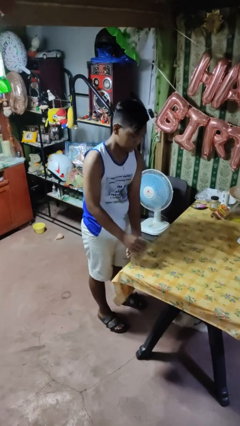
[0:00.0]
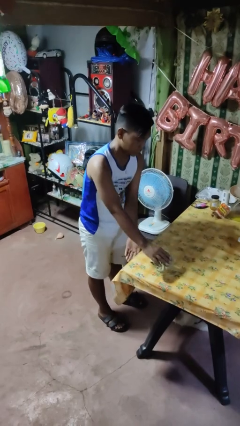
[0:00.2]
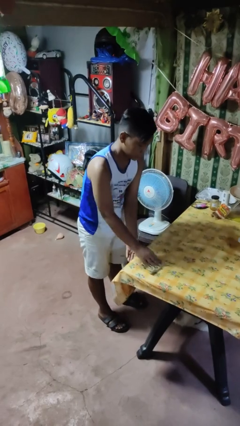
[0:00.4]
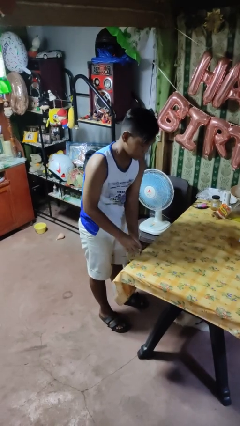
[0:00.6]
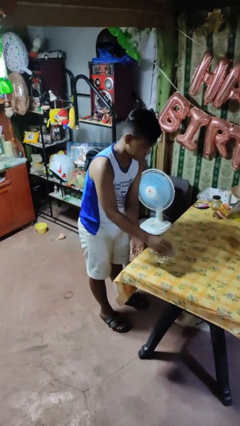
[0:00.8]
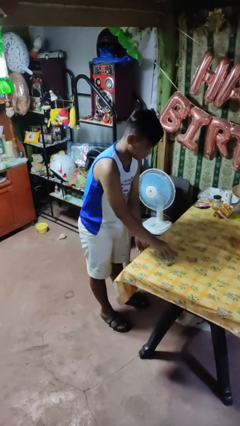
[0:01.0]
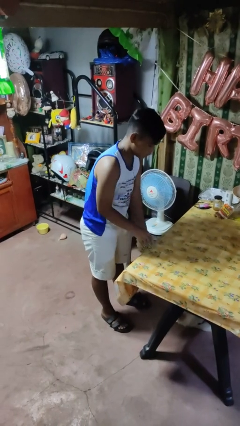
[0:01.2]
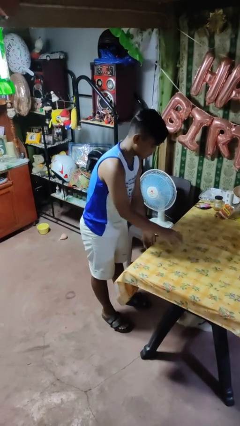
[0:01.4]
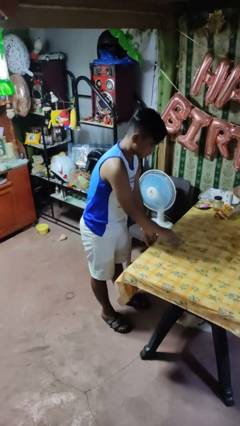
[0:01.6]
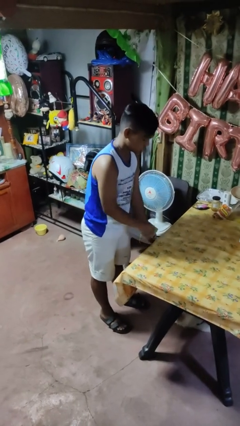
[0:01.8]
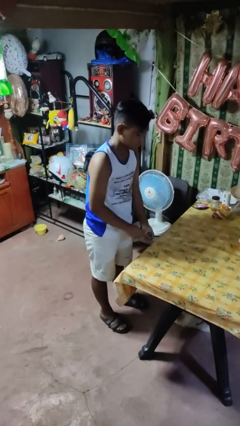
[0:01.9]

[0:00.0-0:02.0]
person cleans table with rag

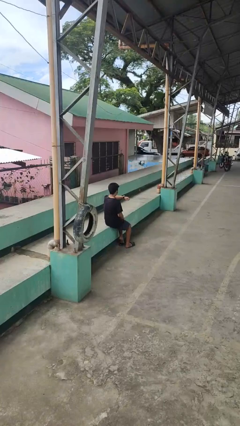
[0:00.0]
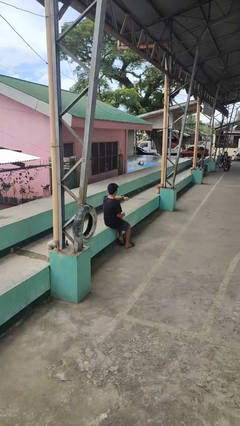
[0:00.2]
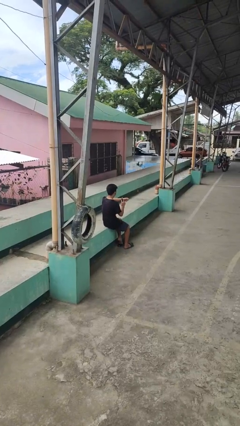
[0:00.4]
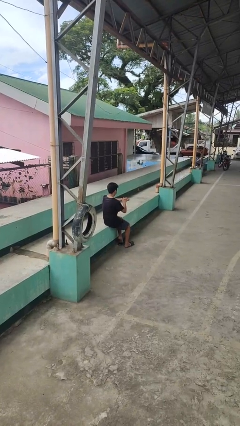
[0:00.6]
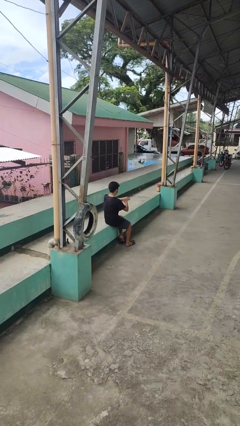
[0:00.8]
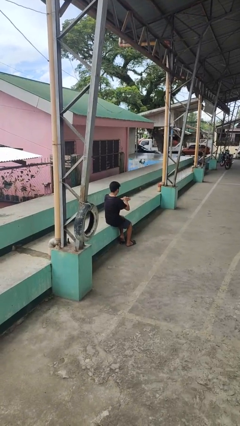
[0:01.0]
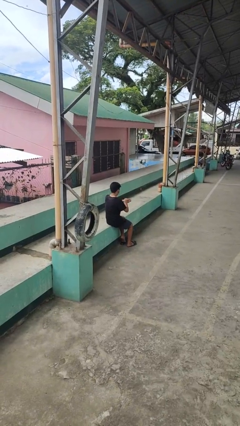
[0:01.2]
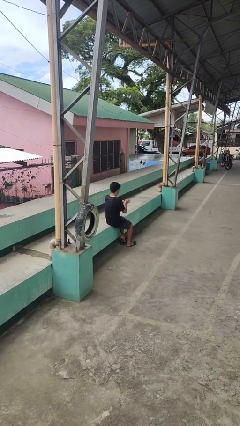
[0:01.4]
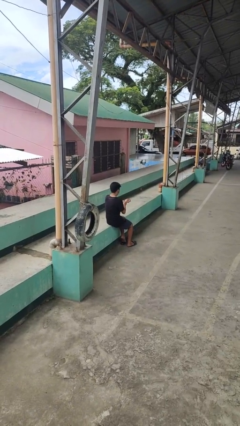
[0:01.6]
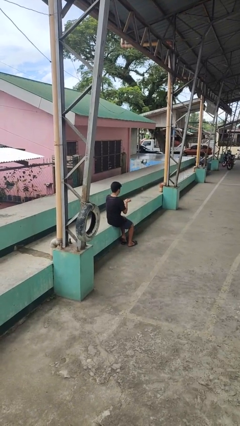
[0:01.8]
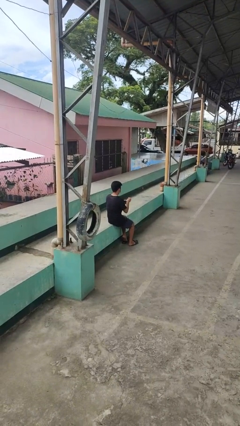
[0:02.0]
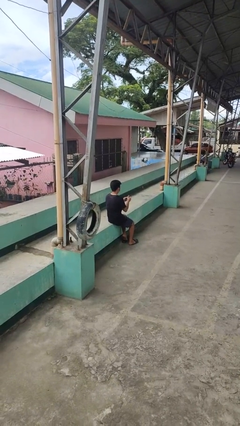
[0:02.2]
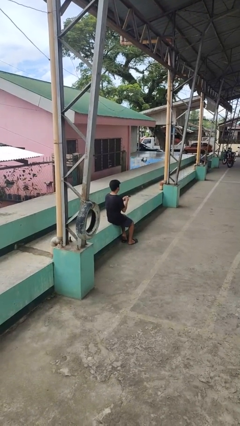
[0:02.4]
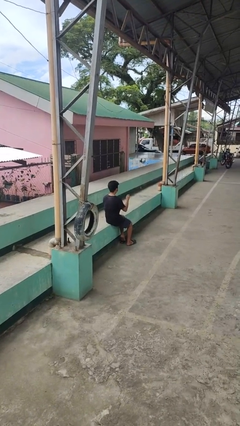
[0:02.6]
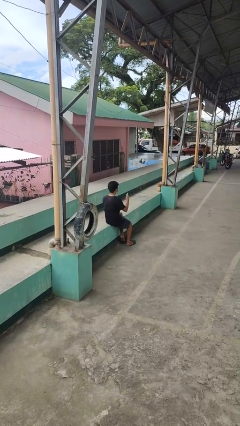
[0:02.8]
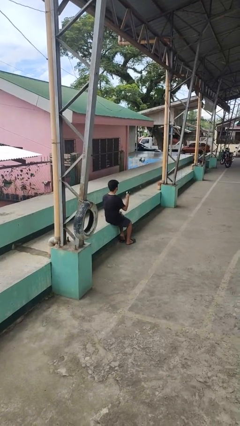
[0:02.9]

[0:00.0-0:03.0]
person takes off wristwatch

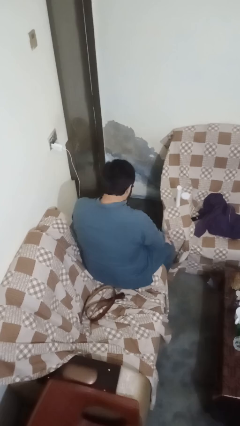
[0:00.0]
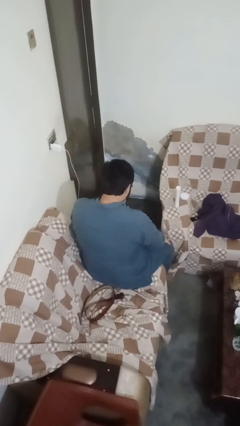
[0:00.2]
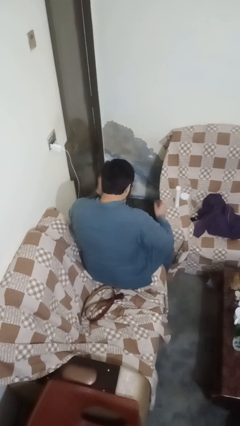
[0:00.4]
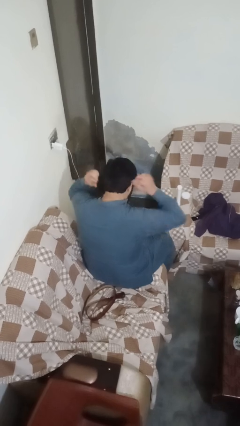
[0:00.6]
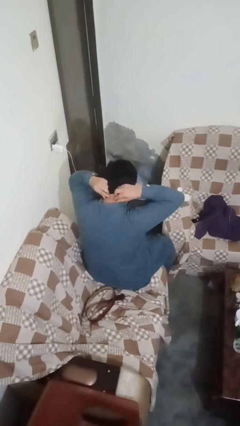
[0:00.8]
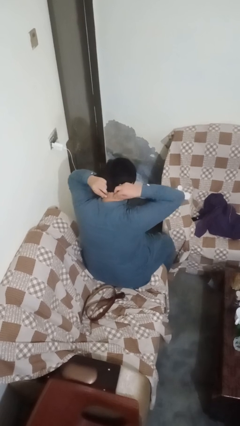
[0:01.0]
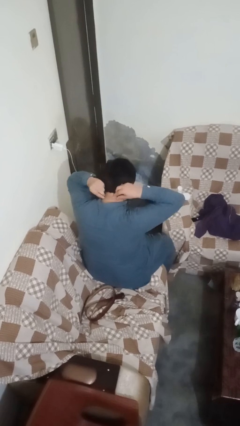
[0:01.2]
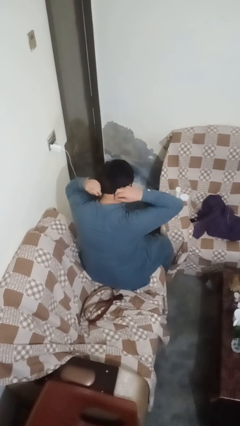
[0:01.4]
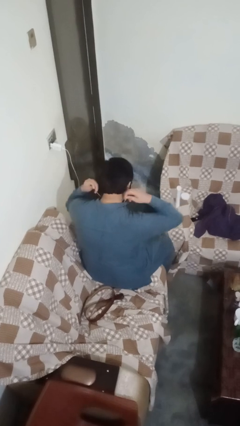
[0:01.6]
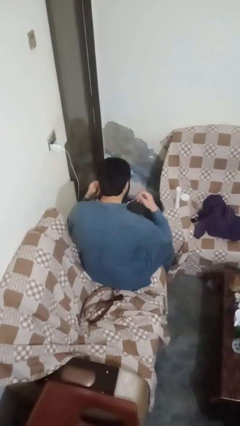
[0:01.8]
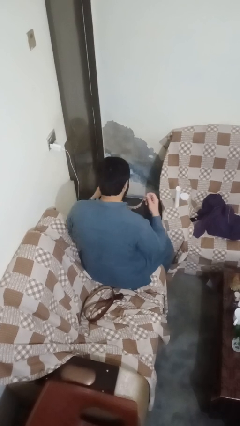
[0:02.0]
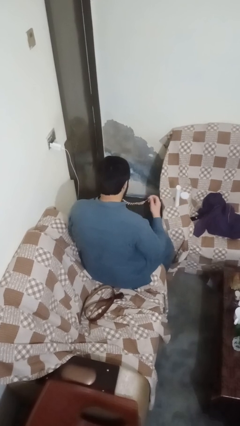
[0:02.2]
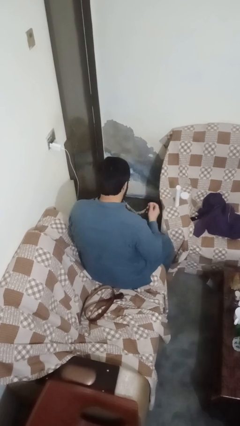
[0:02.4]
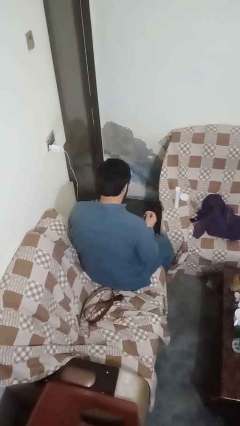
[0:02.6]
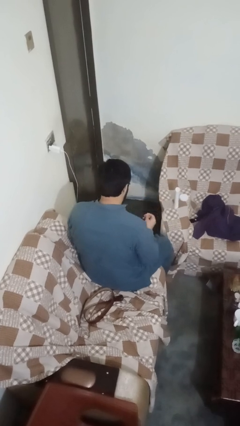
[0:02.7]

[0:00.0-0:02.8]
person takes off necklace

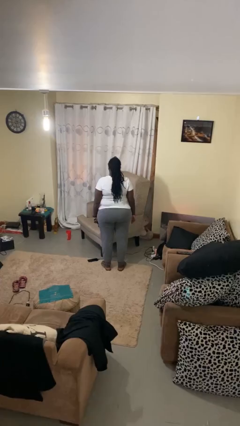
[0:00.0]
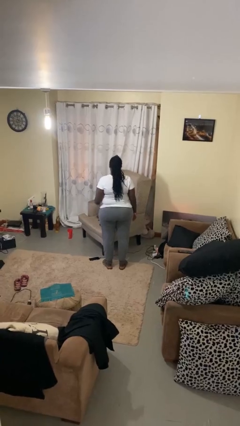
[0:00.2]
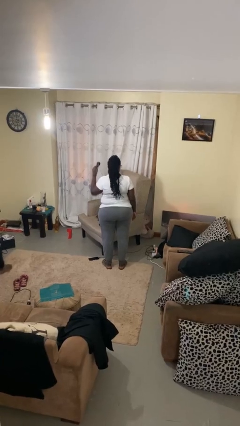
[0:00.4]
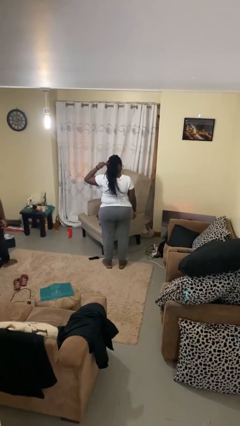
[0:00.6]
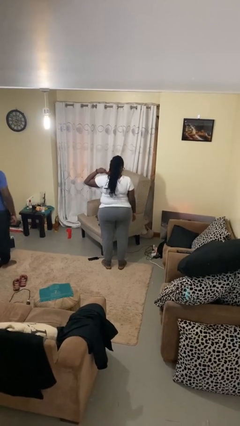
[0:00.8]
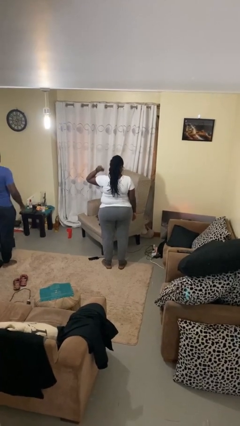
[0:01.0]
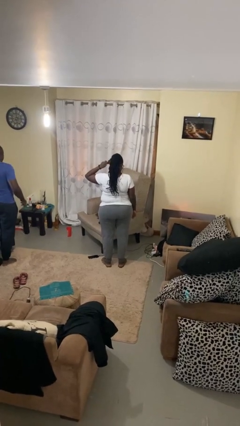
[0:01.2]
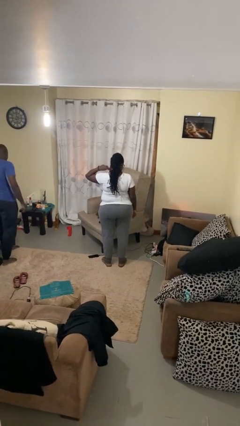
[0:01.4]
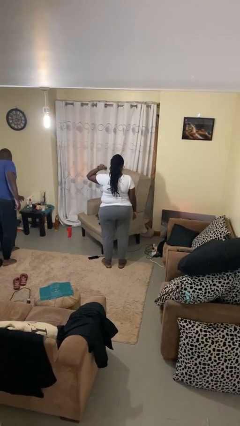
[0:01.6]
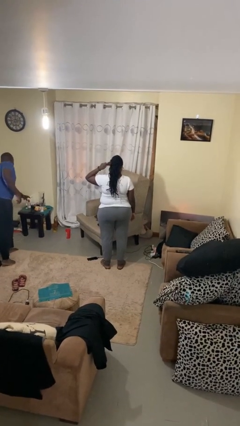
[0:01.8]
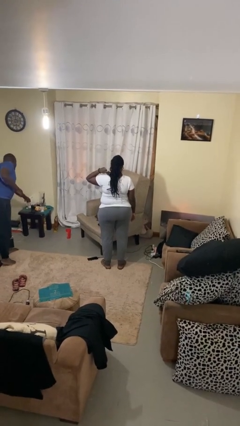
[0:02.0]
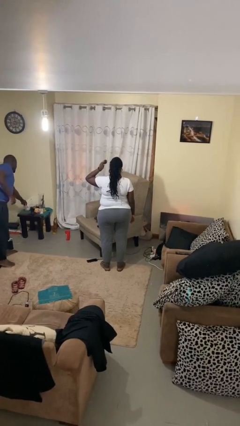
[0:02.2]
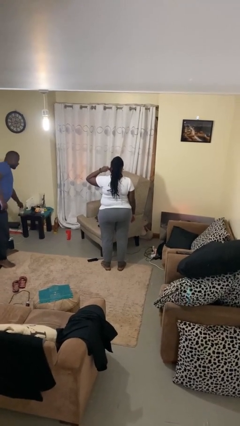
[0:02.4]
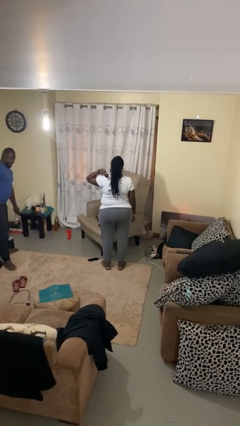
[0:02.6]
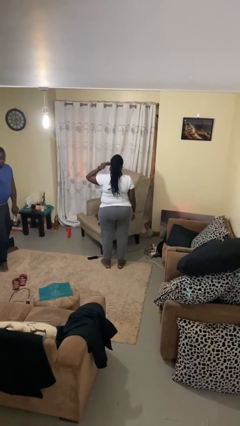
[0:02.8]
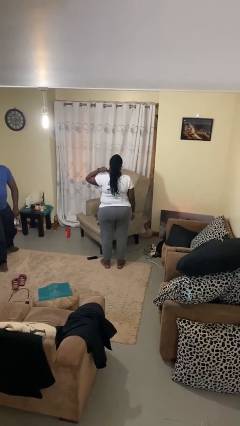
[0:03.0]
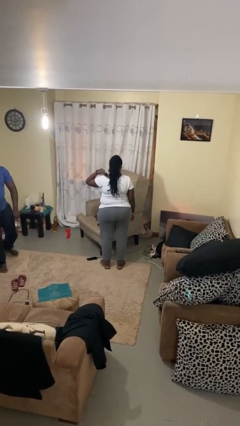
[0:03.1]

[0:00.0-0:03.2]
person brushes hair

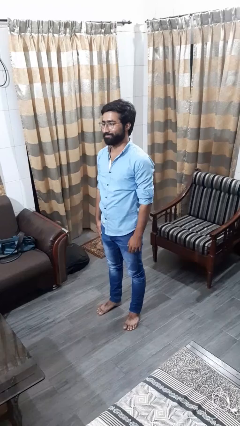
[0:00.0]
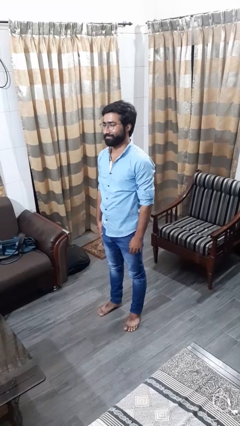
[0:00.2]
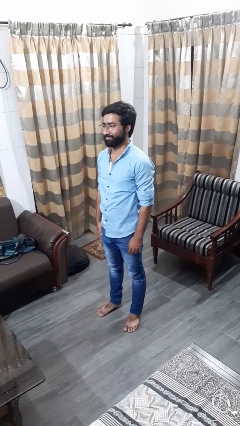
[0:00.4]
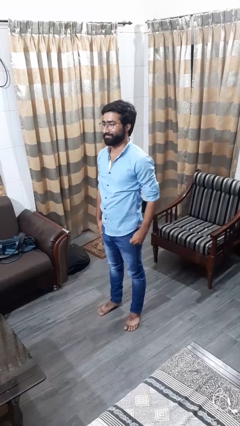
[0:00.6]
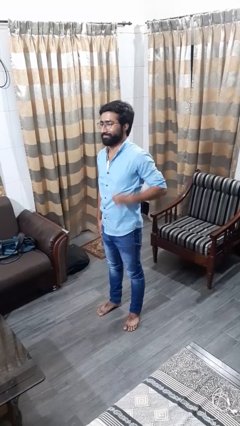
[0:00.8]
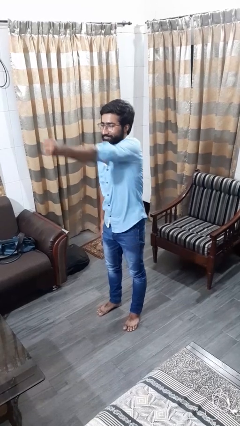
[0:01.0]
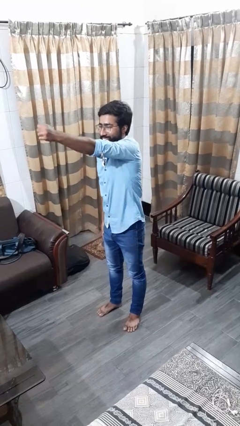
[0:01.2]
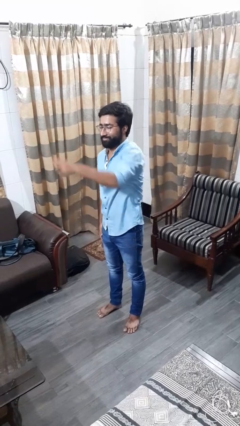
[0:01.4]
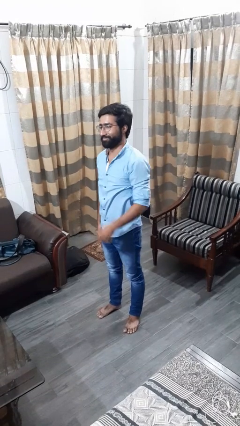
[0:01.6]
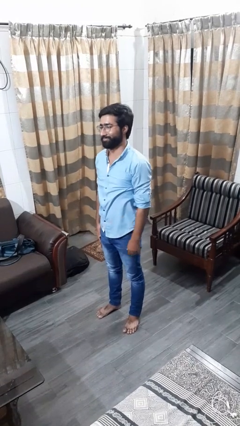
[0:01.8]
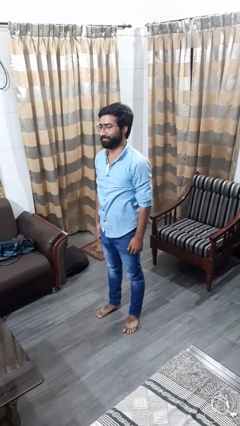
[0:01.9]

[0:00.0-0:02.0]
person punches

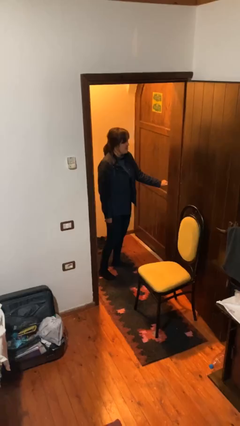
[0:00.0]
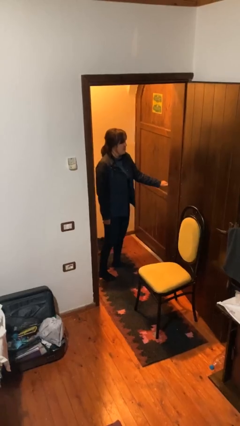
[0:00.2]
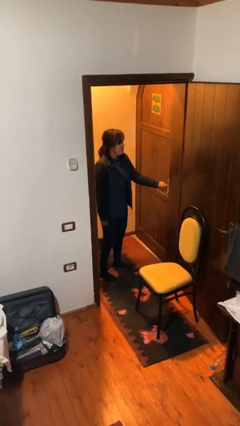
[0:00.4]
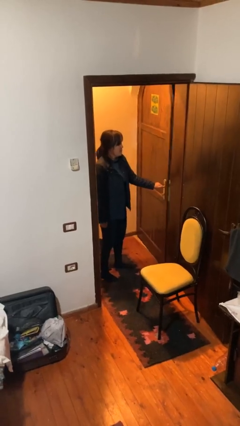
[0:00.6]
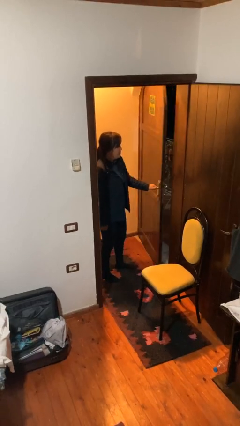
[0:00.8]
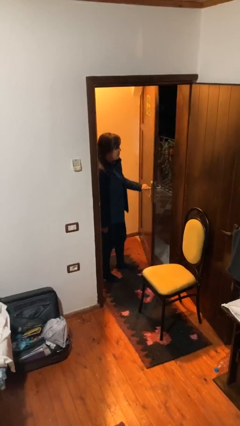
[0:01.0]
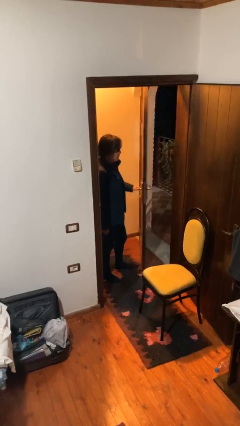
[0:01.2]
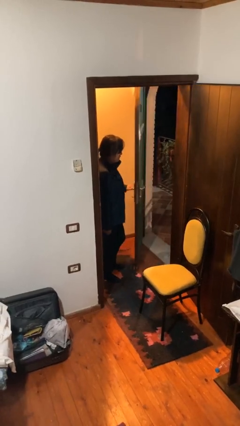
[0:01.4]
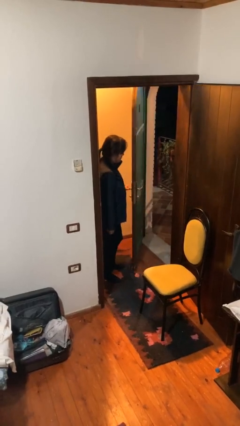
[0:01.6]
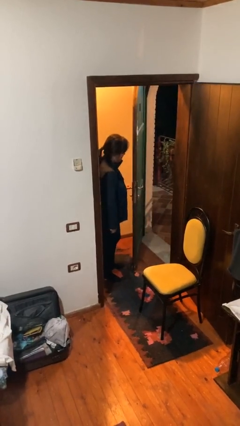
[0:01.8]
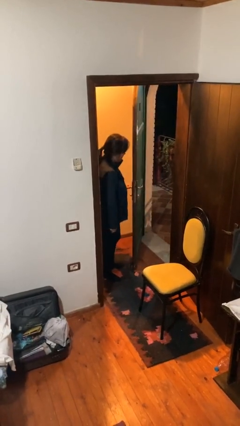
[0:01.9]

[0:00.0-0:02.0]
person opens facility door

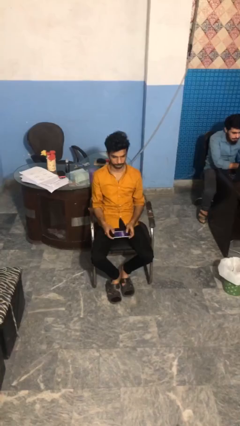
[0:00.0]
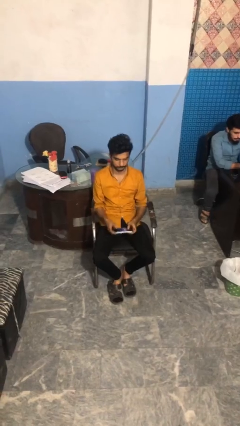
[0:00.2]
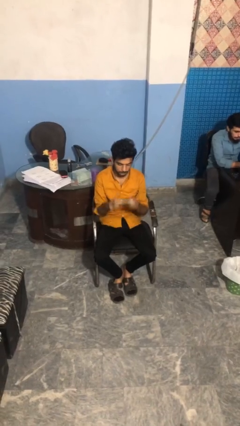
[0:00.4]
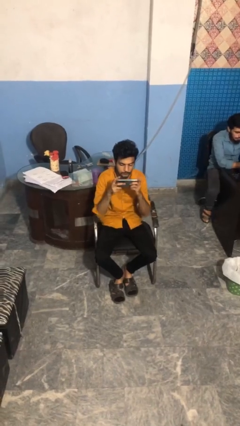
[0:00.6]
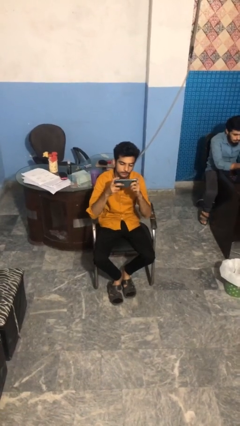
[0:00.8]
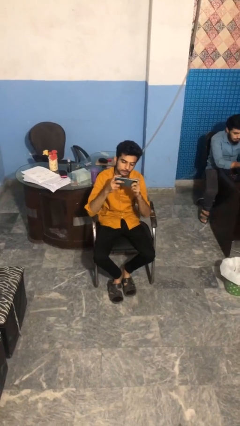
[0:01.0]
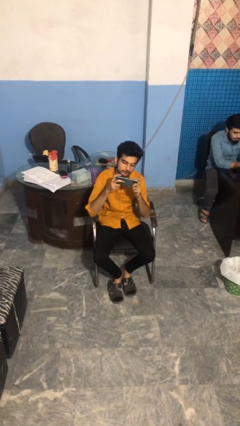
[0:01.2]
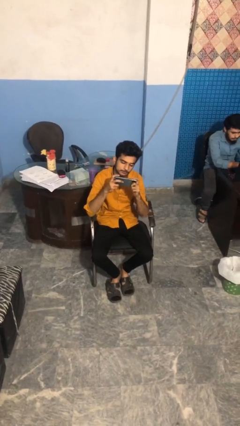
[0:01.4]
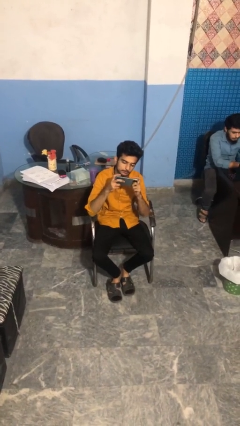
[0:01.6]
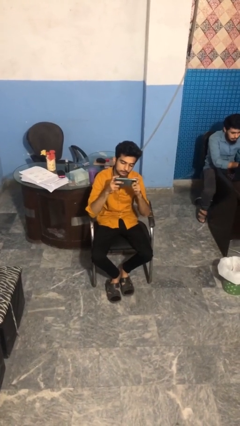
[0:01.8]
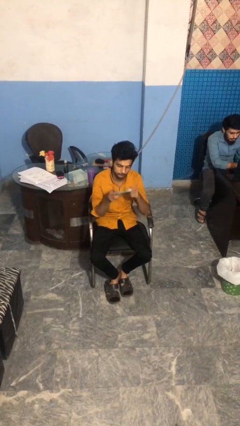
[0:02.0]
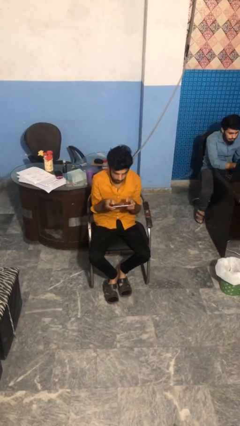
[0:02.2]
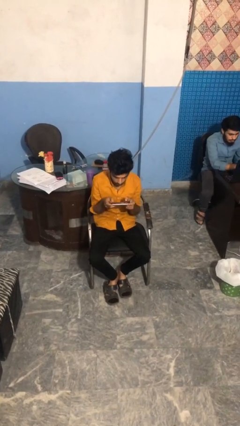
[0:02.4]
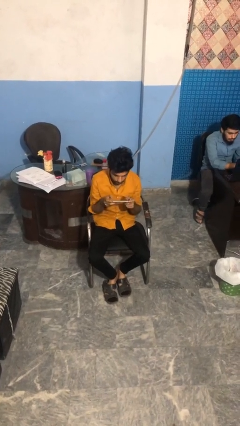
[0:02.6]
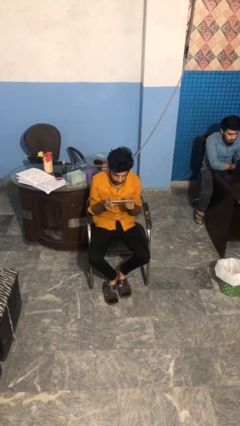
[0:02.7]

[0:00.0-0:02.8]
person interacts with handheld game
